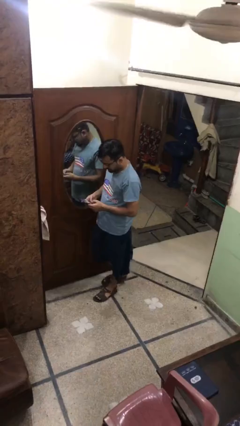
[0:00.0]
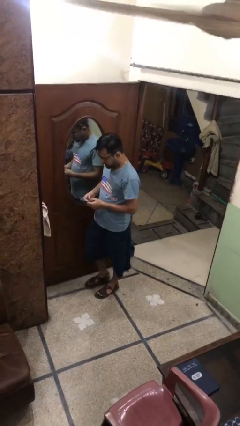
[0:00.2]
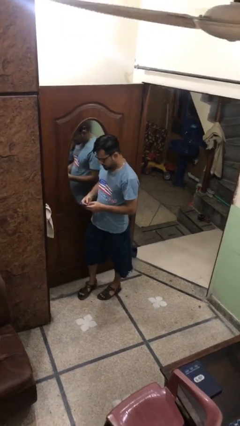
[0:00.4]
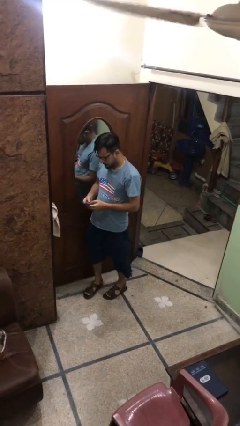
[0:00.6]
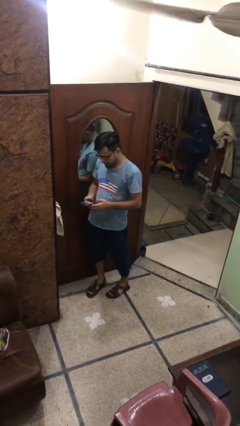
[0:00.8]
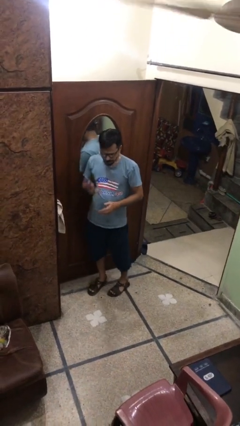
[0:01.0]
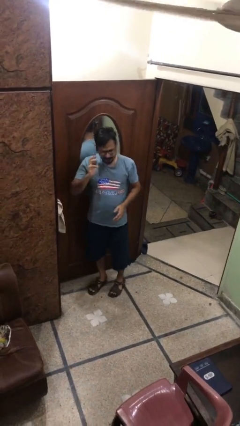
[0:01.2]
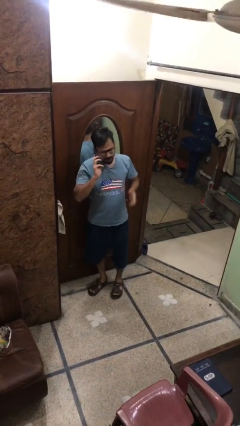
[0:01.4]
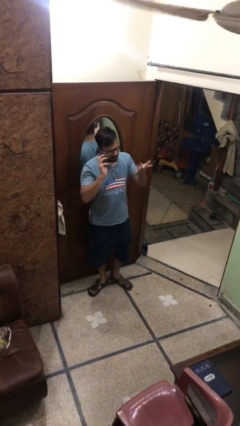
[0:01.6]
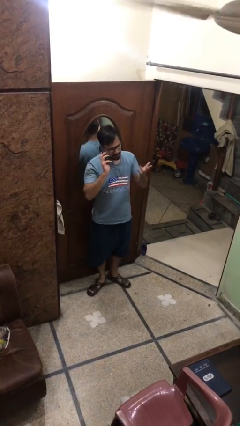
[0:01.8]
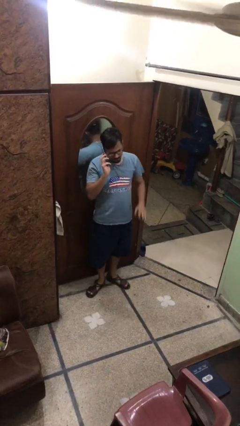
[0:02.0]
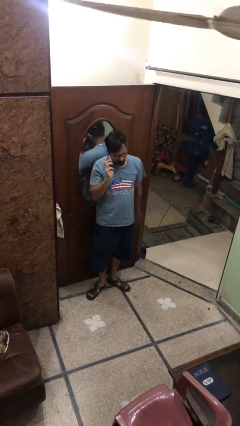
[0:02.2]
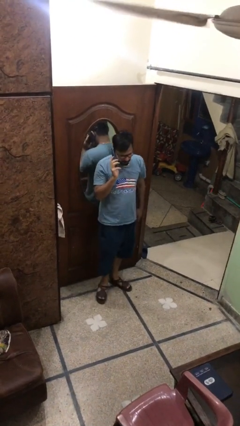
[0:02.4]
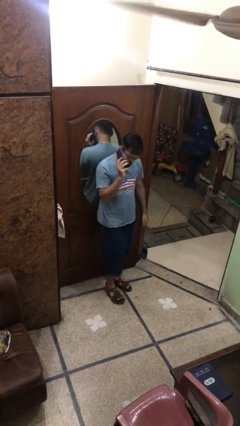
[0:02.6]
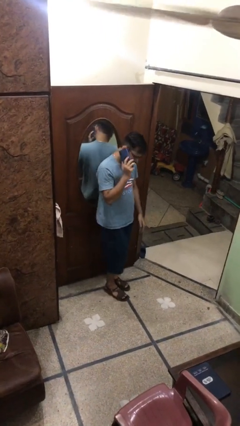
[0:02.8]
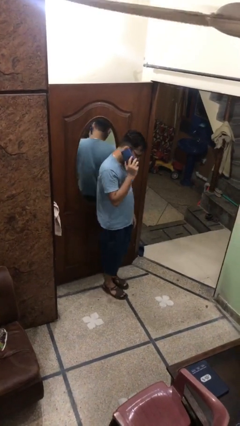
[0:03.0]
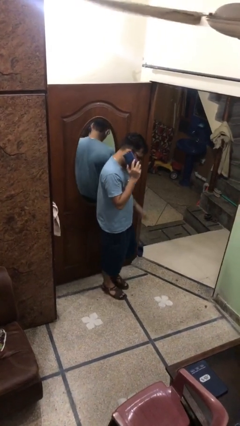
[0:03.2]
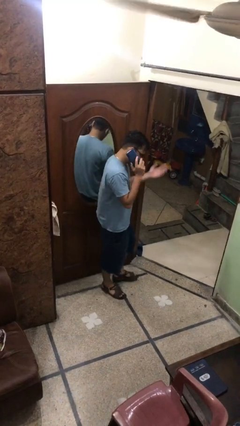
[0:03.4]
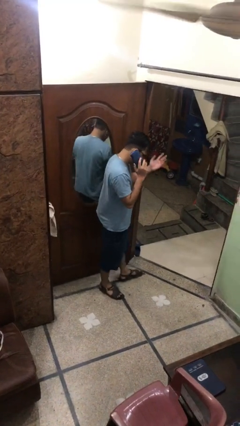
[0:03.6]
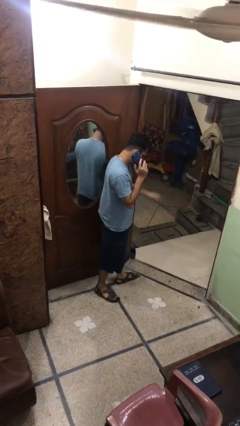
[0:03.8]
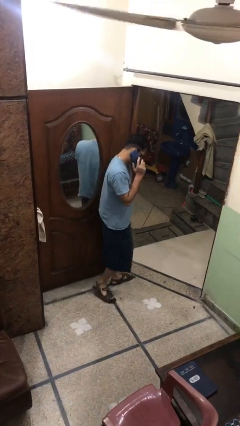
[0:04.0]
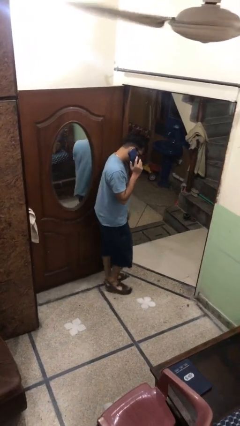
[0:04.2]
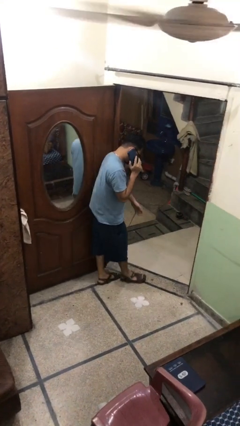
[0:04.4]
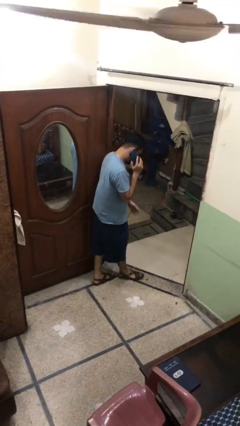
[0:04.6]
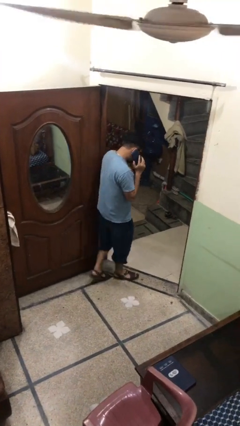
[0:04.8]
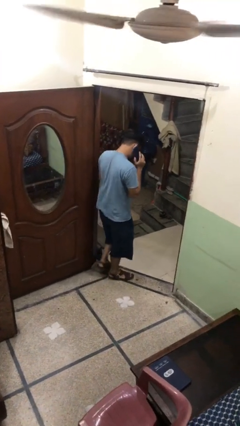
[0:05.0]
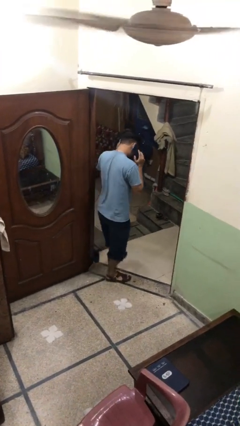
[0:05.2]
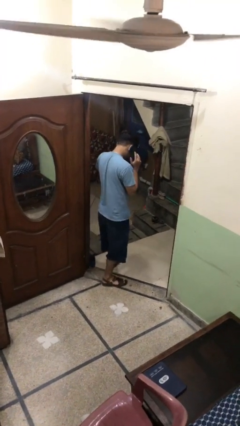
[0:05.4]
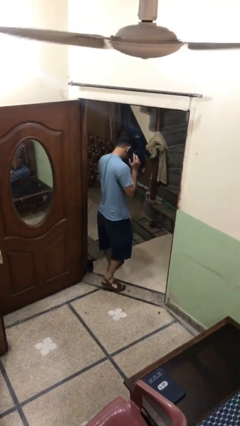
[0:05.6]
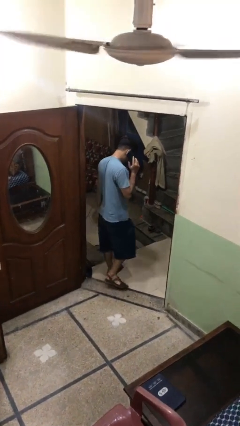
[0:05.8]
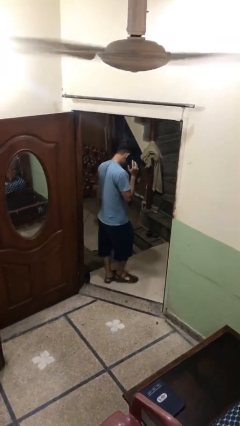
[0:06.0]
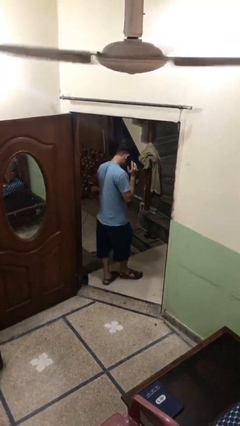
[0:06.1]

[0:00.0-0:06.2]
person talks on phone

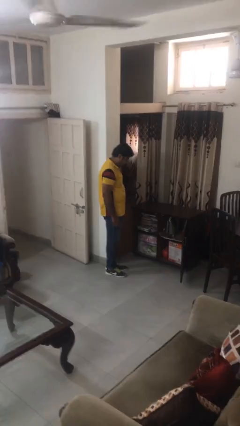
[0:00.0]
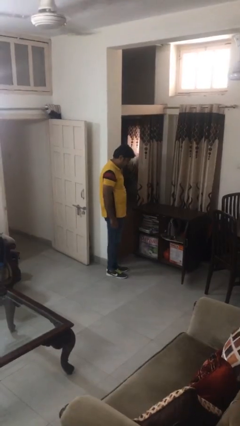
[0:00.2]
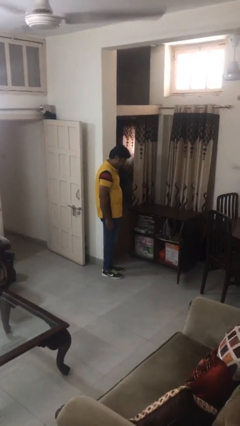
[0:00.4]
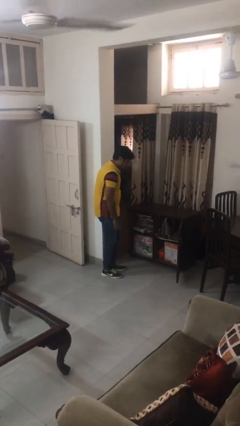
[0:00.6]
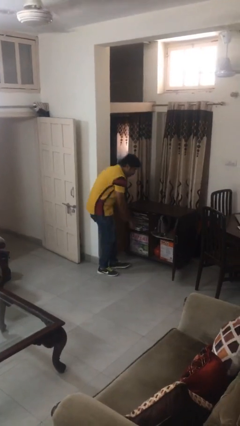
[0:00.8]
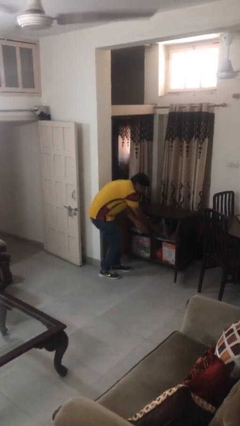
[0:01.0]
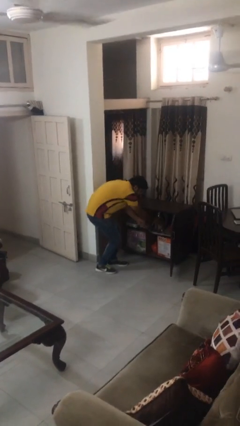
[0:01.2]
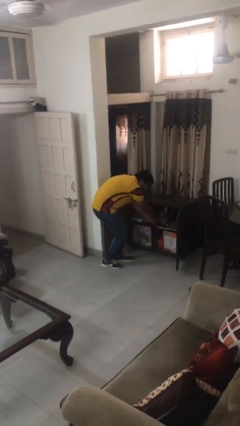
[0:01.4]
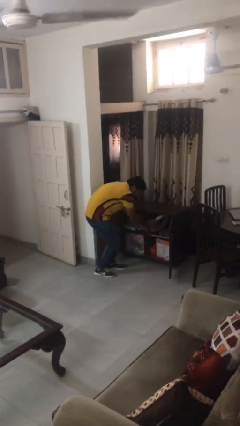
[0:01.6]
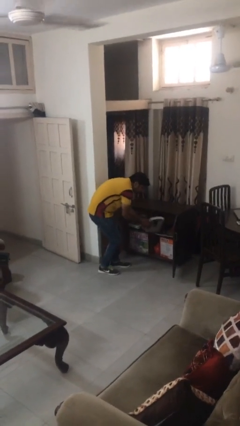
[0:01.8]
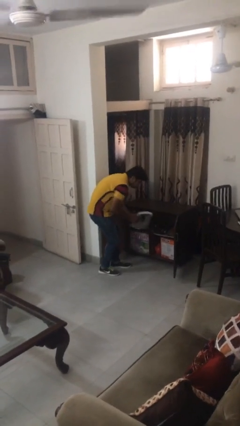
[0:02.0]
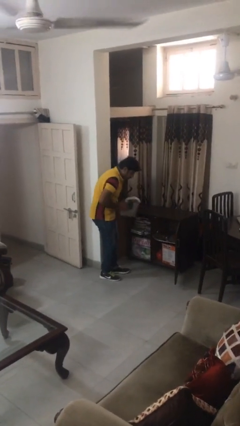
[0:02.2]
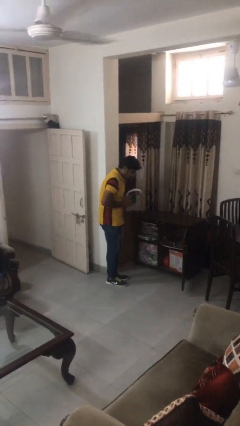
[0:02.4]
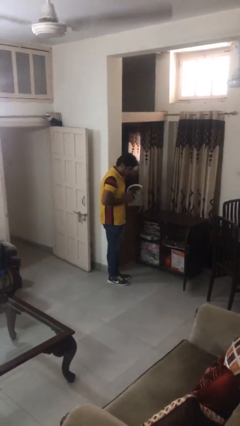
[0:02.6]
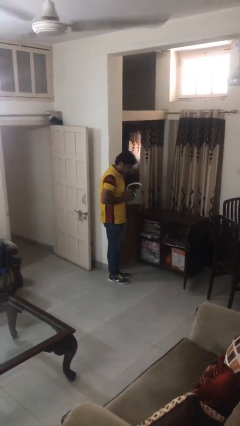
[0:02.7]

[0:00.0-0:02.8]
person picks up object from cabinet

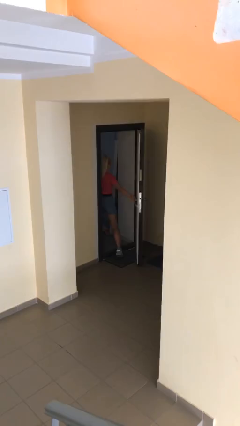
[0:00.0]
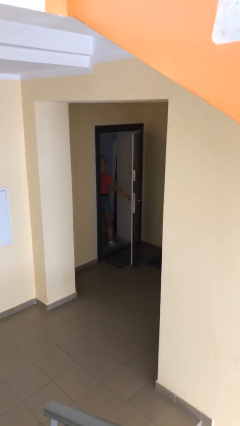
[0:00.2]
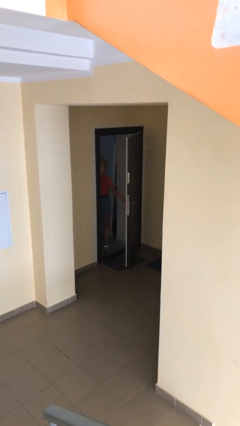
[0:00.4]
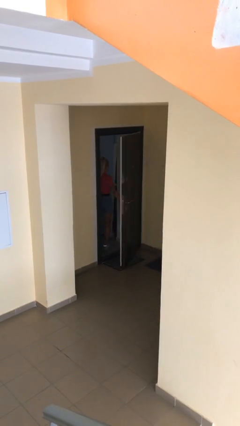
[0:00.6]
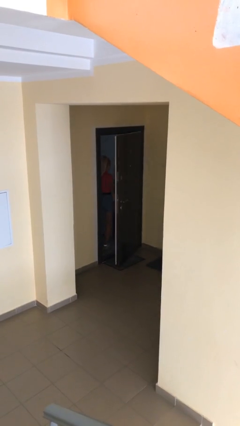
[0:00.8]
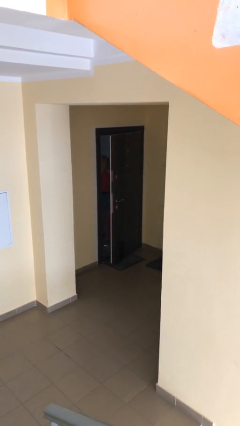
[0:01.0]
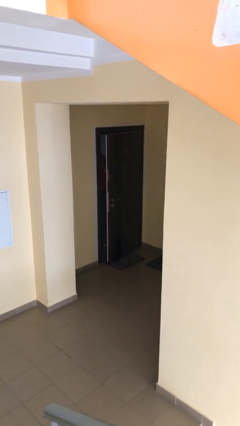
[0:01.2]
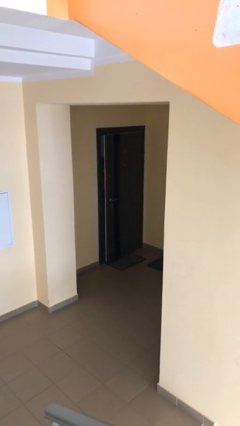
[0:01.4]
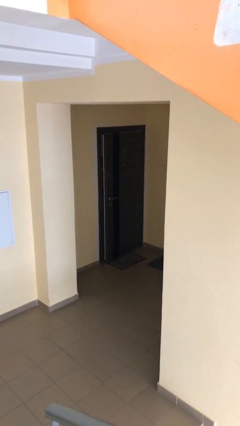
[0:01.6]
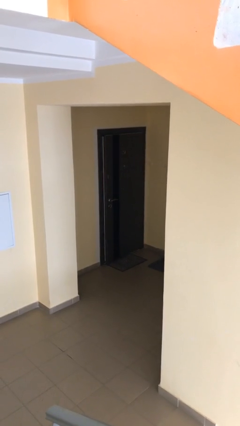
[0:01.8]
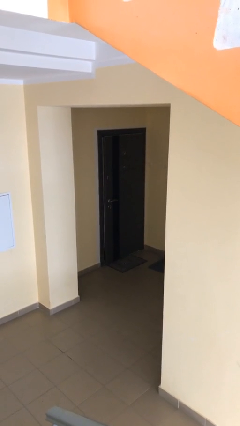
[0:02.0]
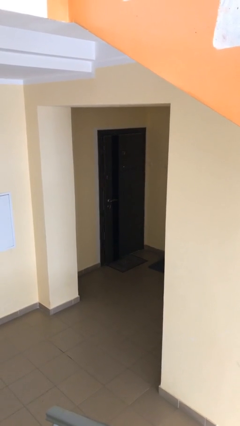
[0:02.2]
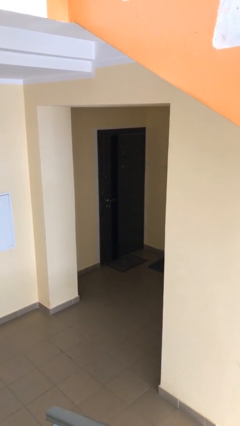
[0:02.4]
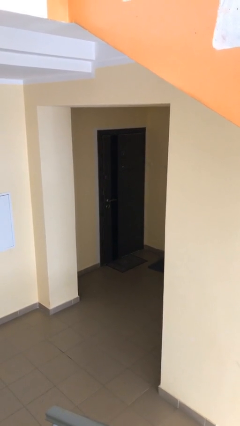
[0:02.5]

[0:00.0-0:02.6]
person closes facility door

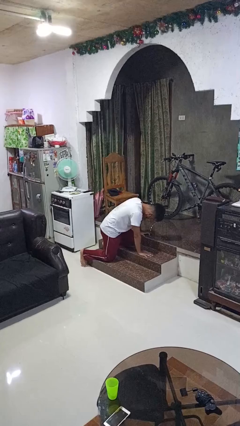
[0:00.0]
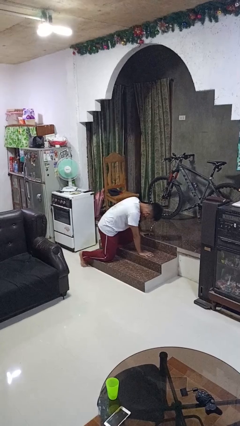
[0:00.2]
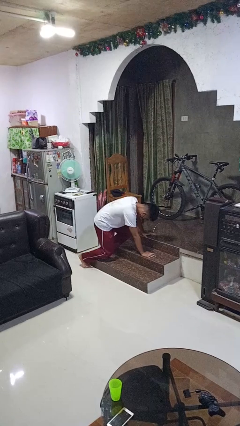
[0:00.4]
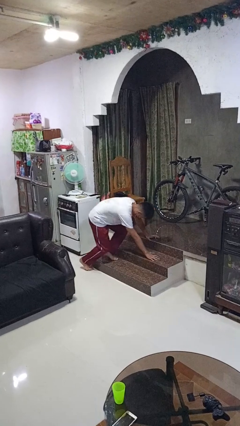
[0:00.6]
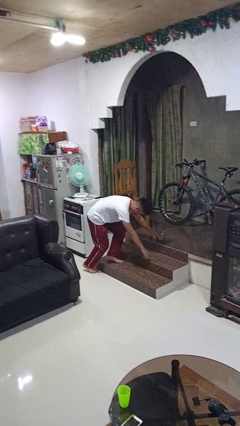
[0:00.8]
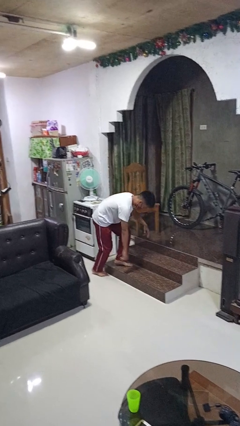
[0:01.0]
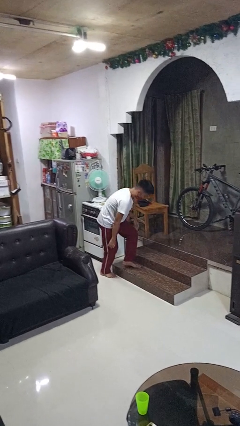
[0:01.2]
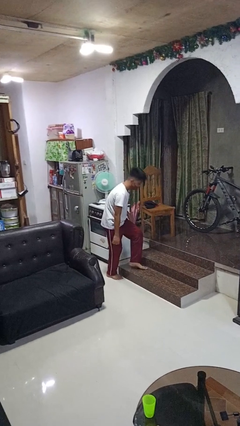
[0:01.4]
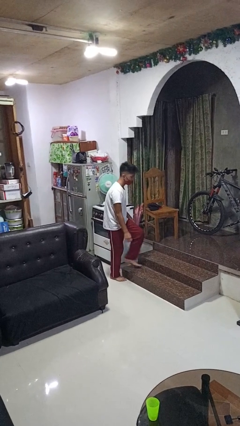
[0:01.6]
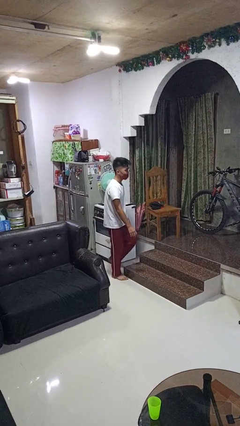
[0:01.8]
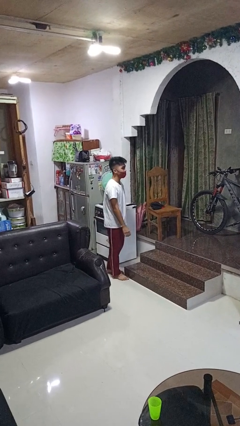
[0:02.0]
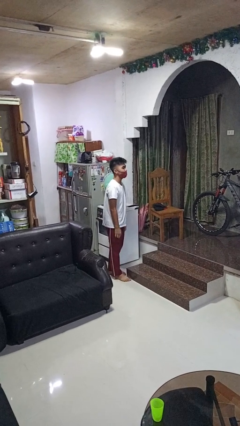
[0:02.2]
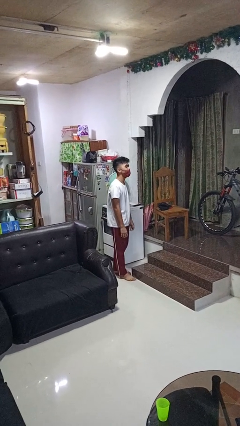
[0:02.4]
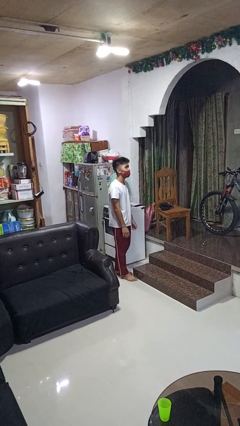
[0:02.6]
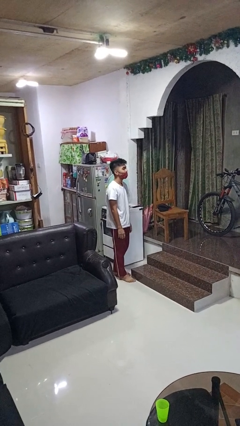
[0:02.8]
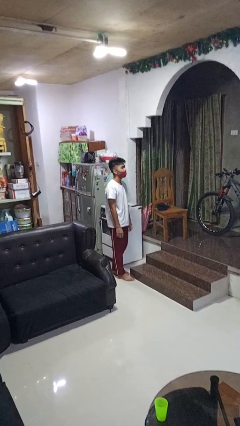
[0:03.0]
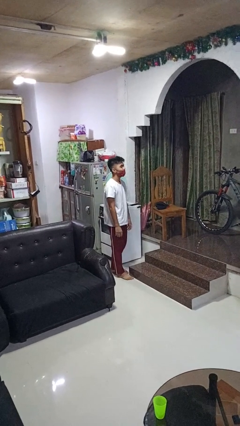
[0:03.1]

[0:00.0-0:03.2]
person stands up from floor

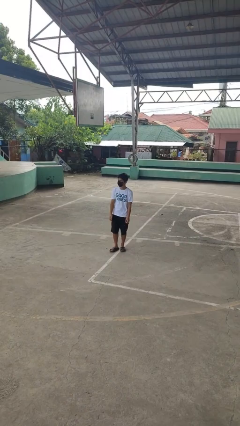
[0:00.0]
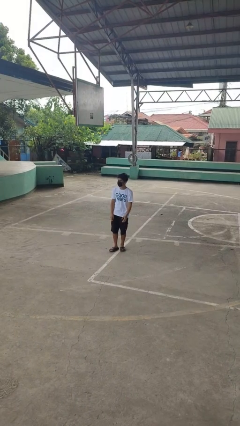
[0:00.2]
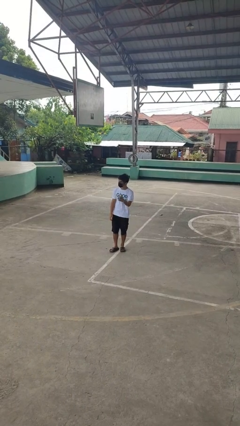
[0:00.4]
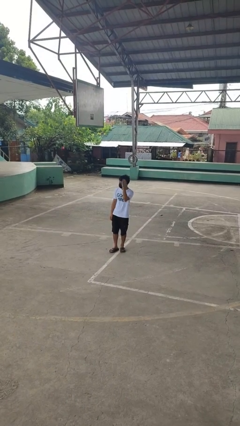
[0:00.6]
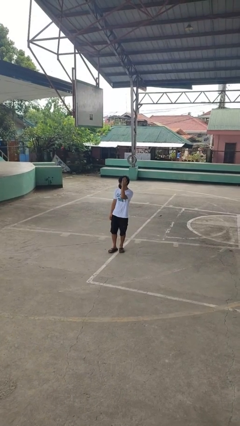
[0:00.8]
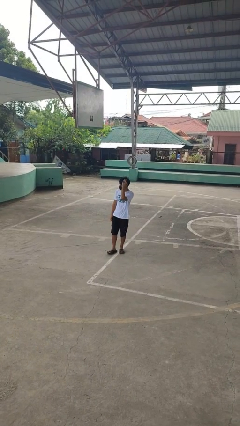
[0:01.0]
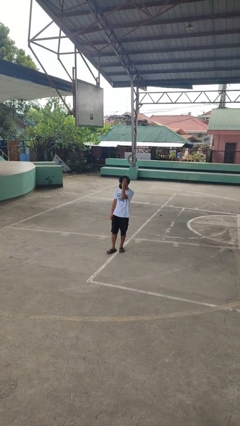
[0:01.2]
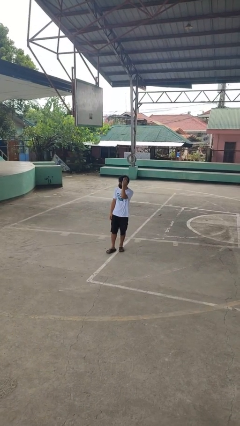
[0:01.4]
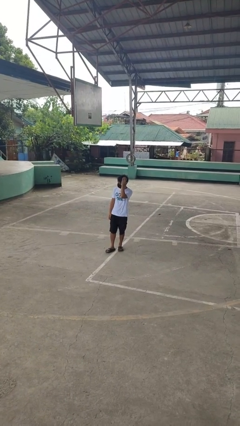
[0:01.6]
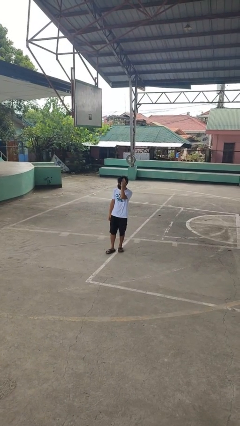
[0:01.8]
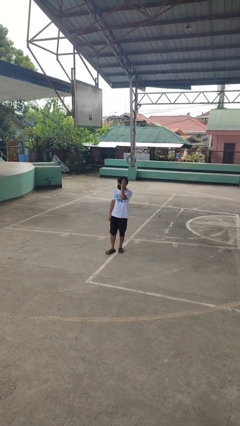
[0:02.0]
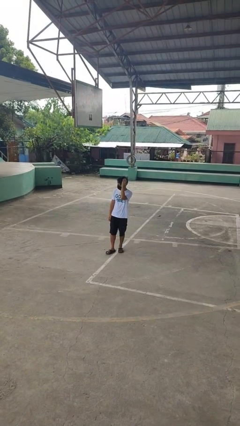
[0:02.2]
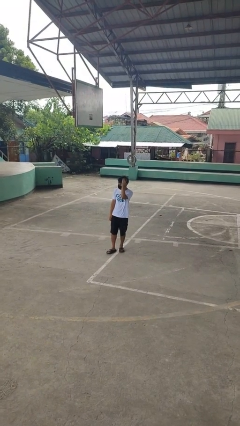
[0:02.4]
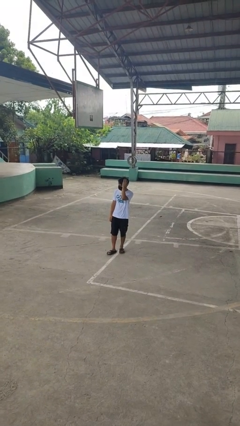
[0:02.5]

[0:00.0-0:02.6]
person pats head

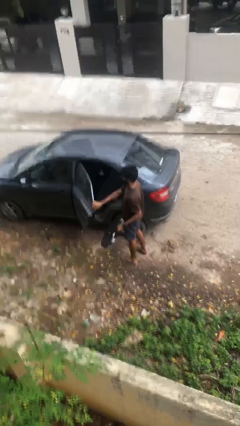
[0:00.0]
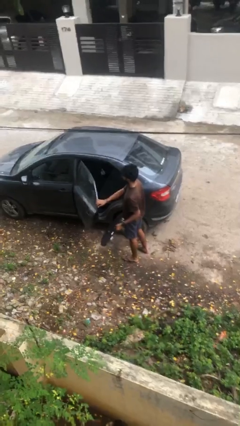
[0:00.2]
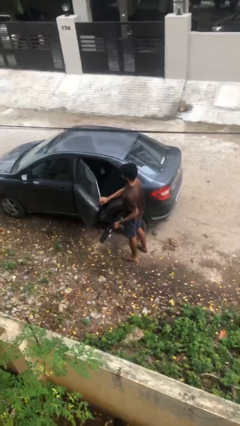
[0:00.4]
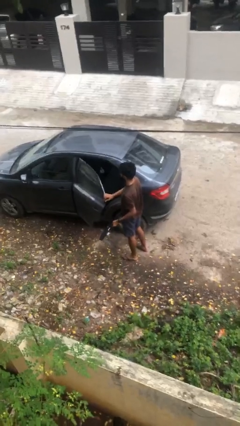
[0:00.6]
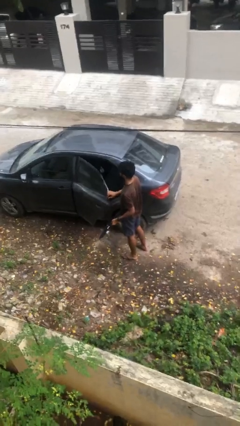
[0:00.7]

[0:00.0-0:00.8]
person closes car door
